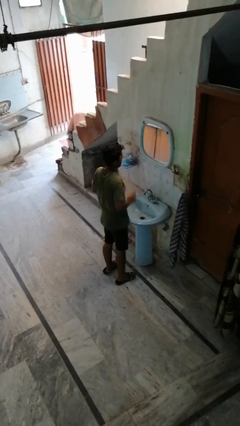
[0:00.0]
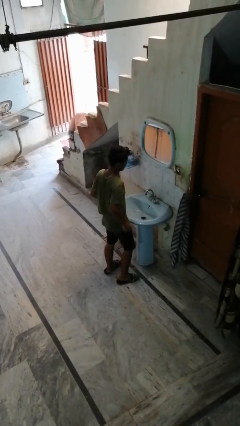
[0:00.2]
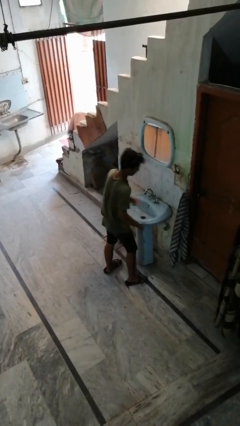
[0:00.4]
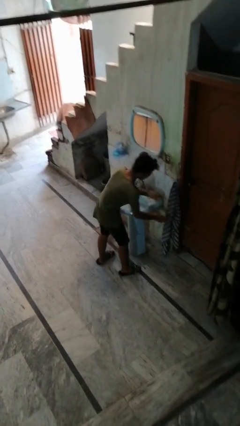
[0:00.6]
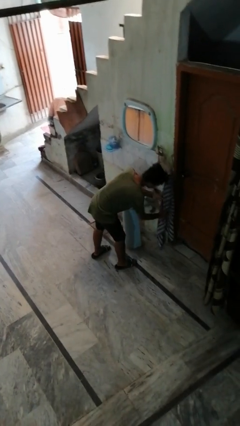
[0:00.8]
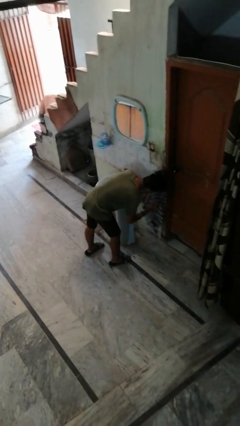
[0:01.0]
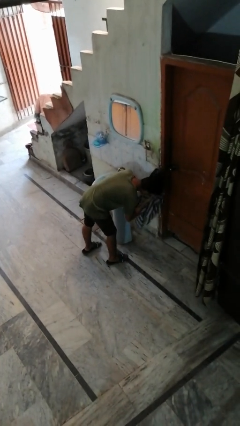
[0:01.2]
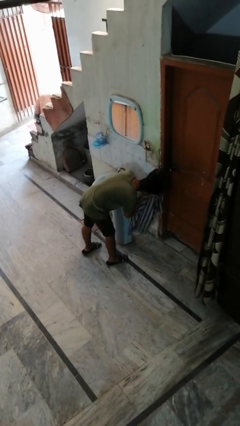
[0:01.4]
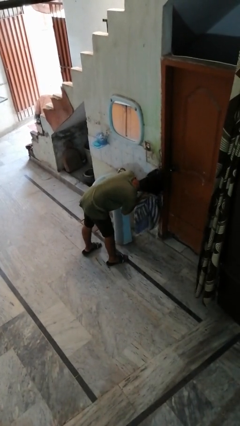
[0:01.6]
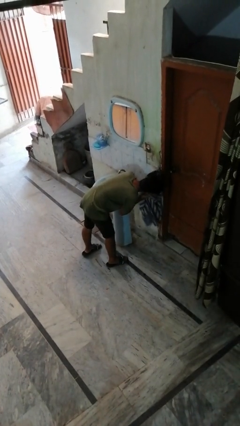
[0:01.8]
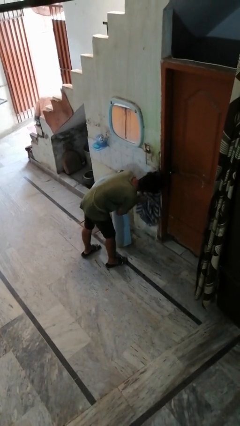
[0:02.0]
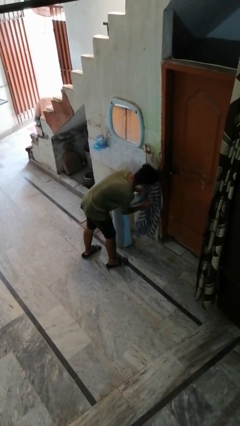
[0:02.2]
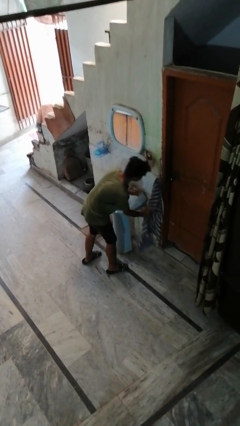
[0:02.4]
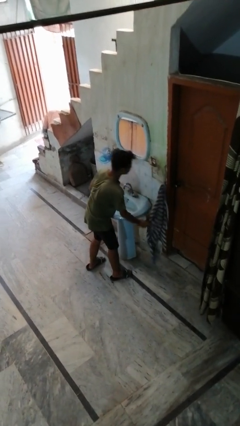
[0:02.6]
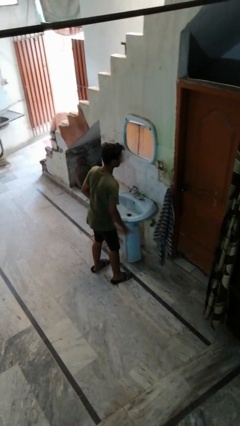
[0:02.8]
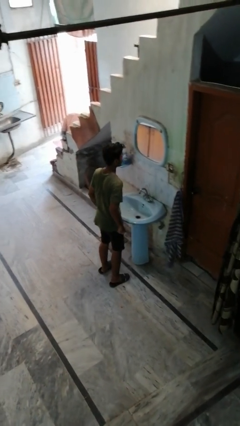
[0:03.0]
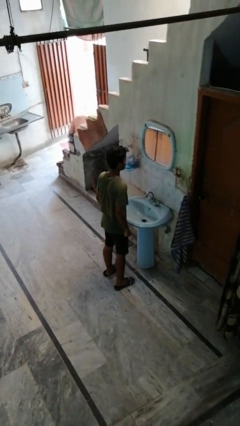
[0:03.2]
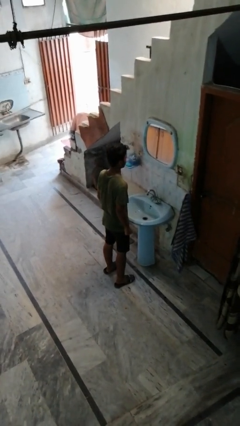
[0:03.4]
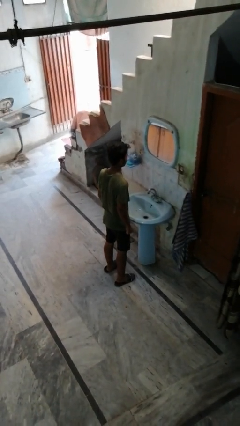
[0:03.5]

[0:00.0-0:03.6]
person dries face with towel

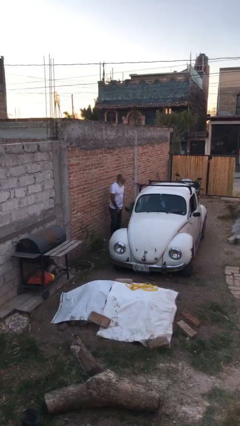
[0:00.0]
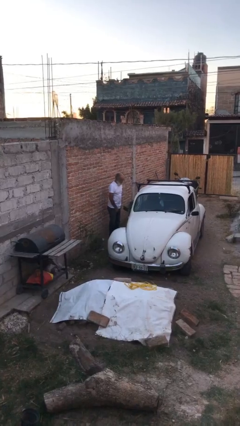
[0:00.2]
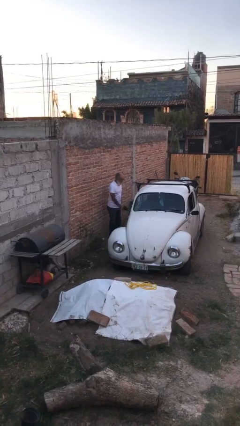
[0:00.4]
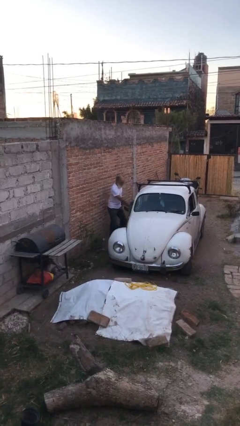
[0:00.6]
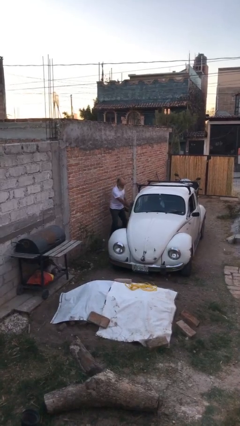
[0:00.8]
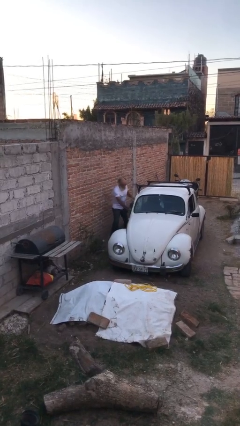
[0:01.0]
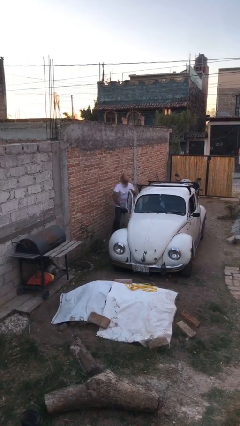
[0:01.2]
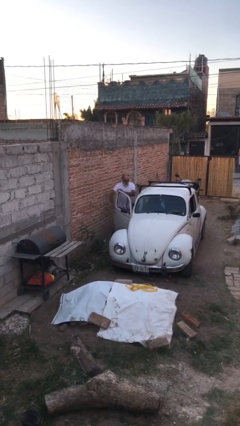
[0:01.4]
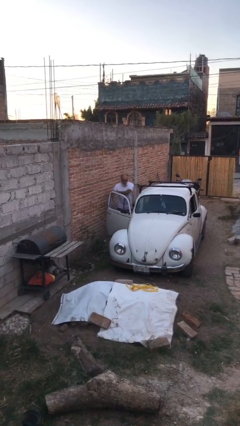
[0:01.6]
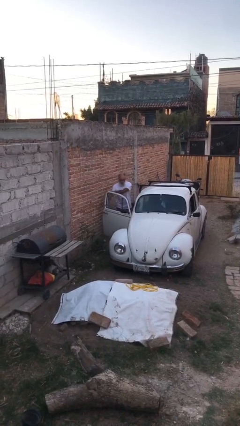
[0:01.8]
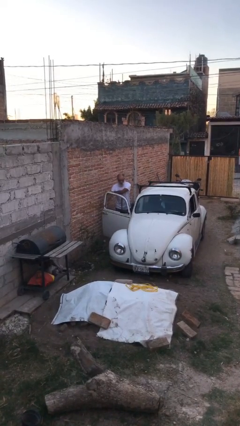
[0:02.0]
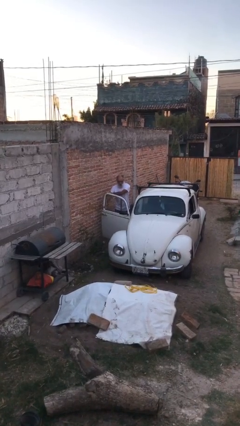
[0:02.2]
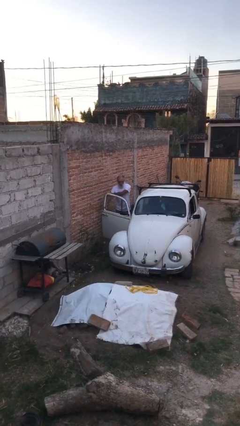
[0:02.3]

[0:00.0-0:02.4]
person opens car door

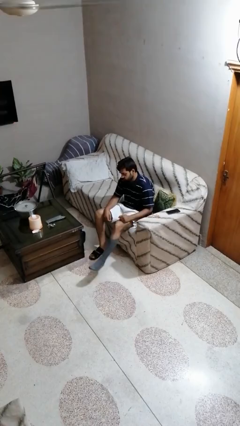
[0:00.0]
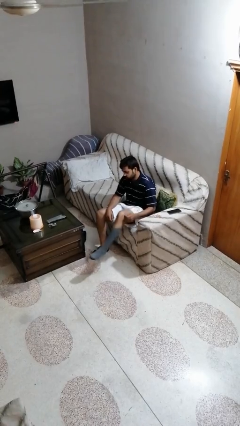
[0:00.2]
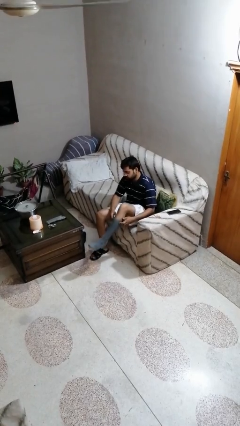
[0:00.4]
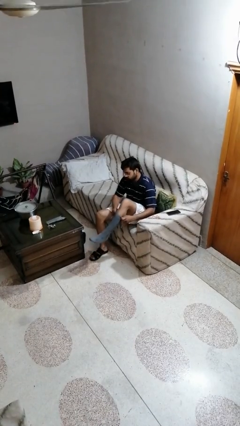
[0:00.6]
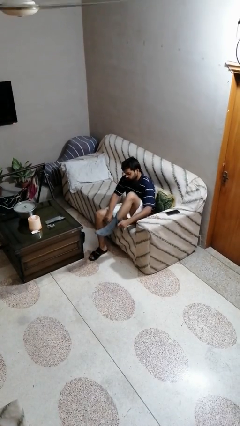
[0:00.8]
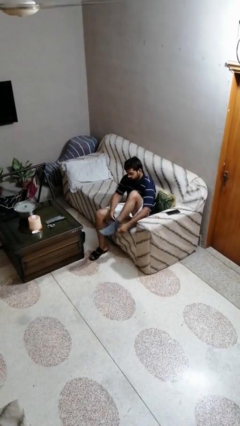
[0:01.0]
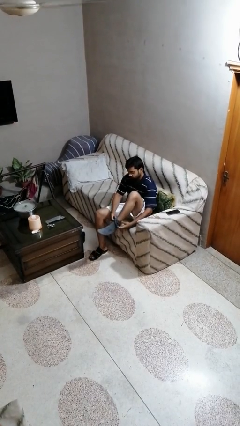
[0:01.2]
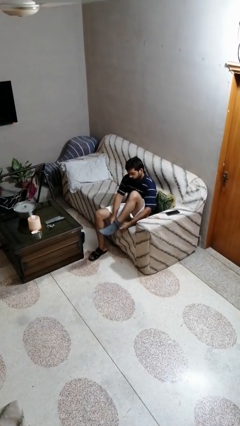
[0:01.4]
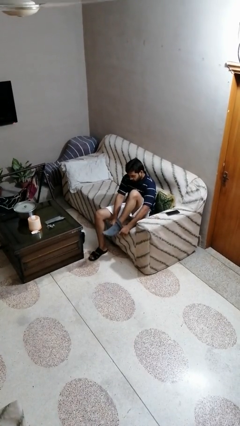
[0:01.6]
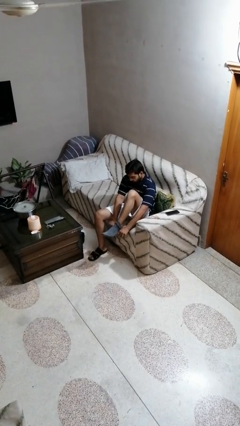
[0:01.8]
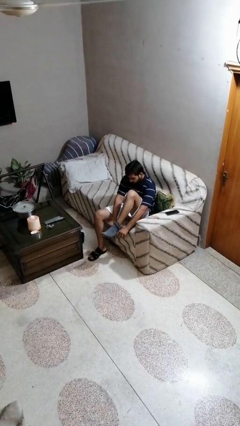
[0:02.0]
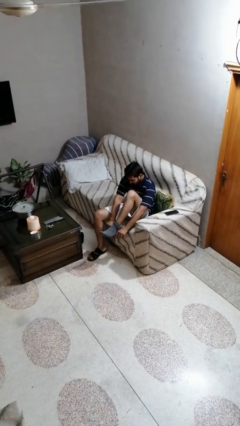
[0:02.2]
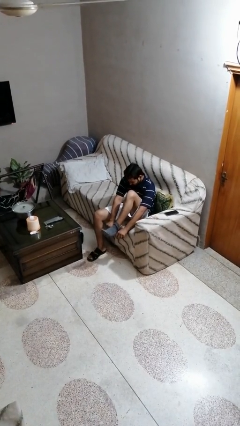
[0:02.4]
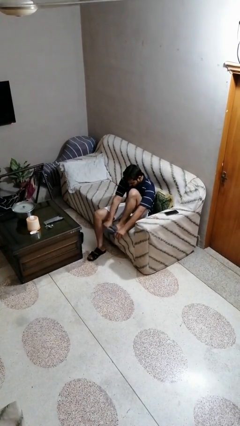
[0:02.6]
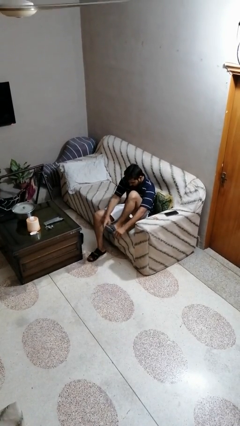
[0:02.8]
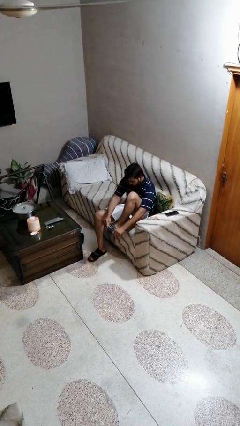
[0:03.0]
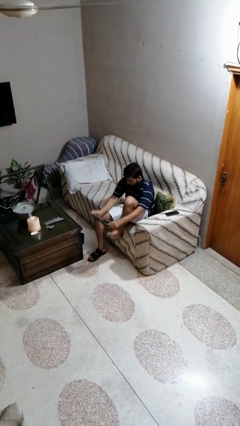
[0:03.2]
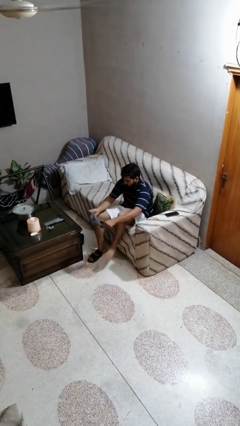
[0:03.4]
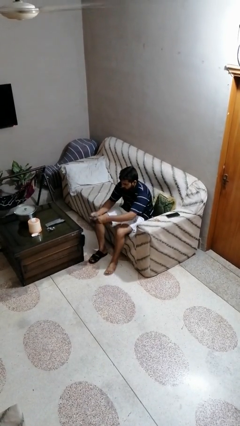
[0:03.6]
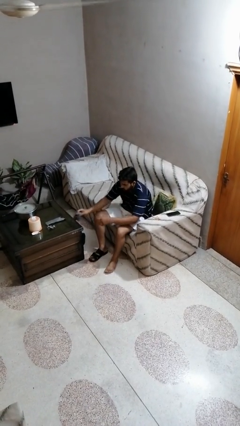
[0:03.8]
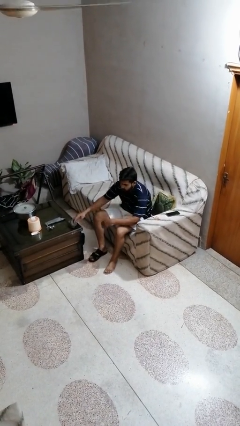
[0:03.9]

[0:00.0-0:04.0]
person takes off socks

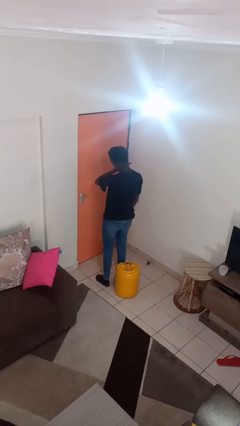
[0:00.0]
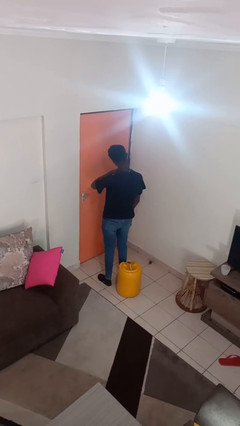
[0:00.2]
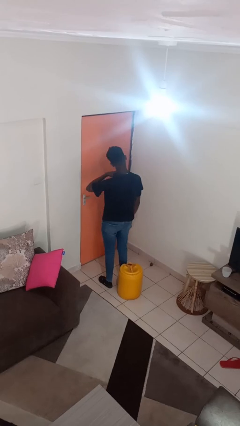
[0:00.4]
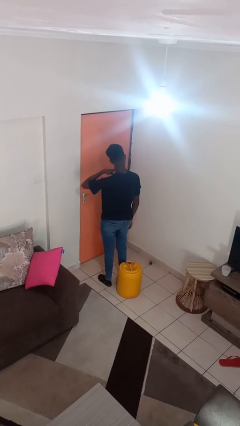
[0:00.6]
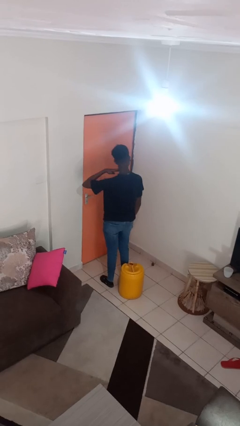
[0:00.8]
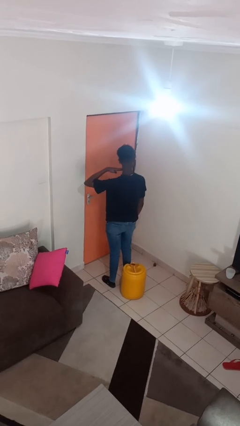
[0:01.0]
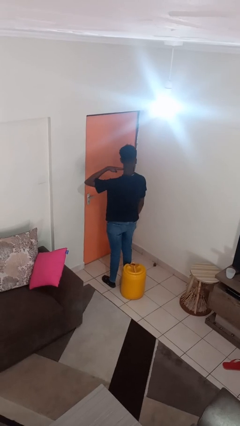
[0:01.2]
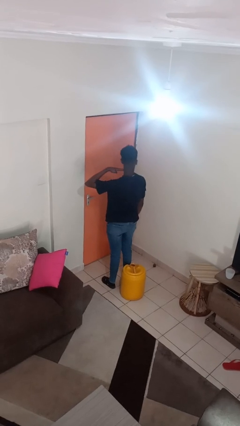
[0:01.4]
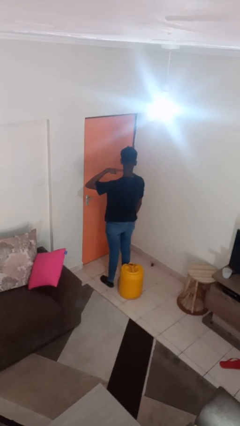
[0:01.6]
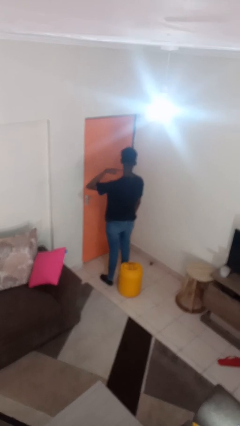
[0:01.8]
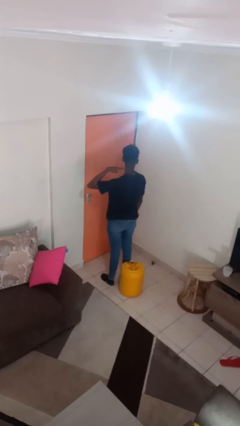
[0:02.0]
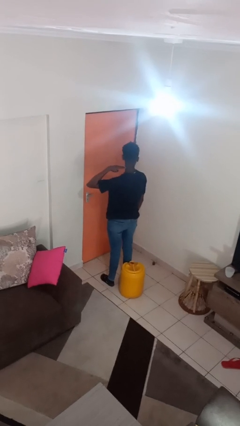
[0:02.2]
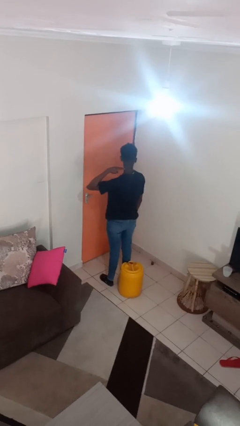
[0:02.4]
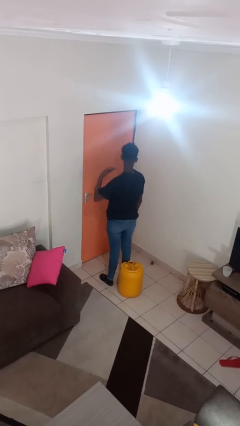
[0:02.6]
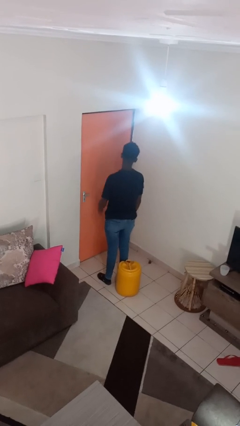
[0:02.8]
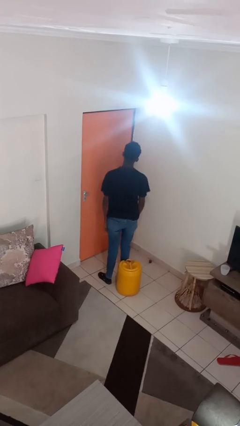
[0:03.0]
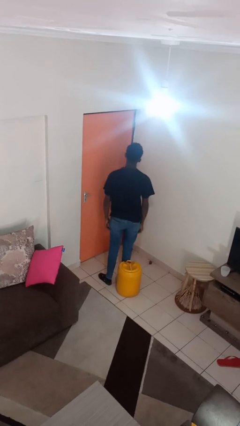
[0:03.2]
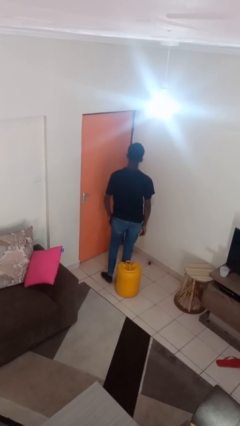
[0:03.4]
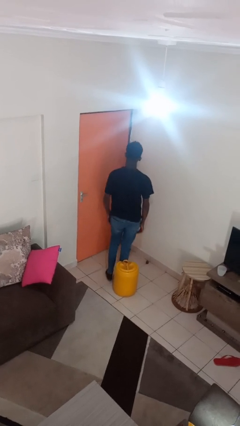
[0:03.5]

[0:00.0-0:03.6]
person gestures cut

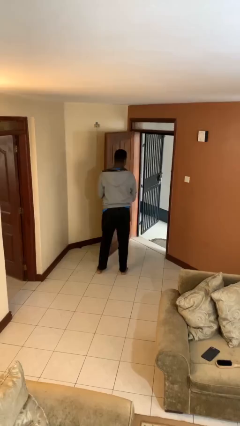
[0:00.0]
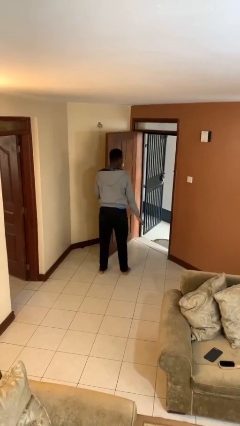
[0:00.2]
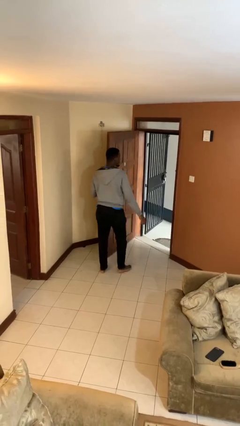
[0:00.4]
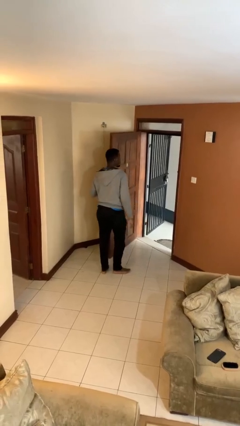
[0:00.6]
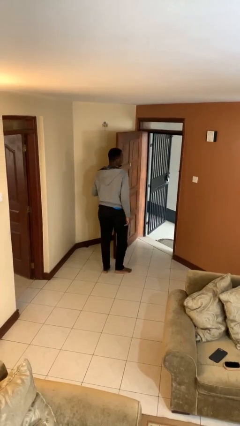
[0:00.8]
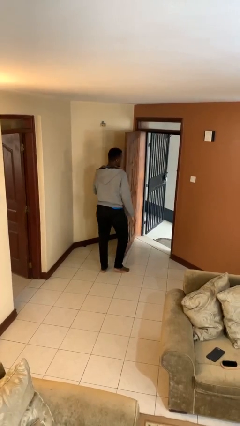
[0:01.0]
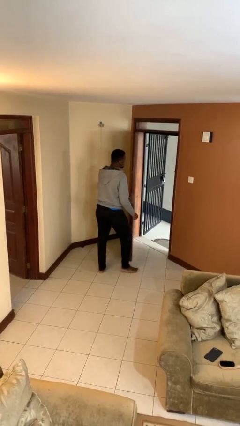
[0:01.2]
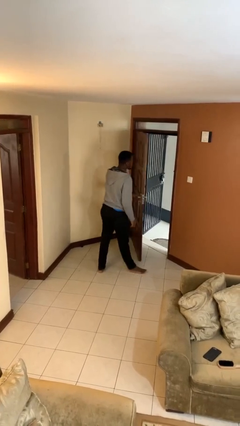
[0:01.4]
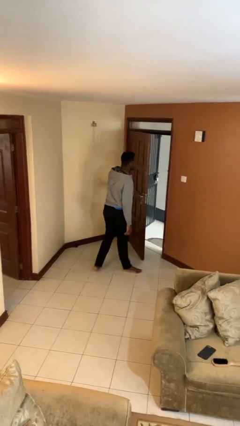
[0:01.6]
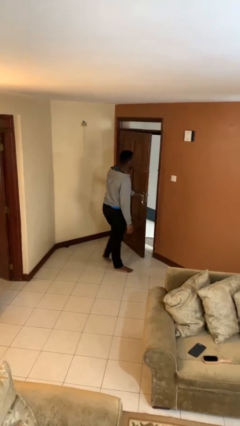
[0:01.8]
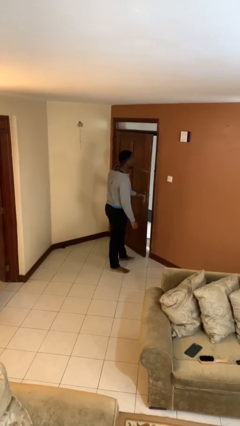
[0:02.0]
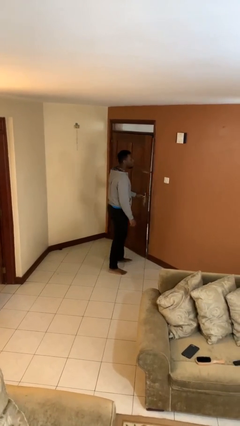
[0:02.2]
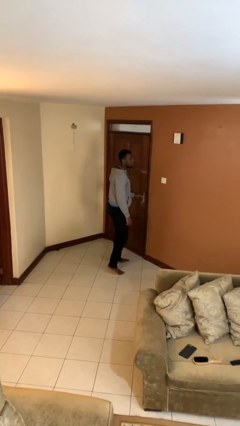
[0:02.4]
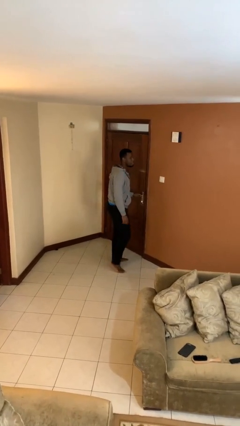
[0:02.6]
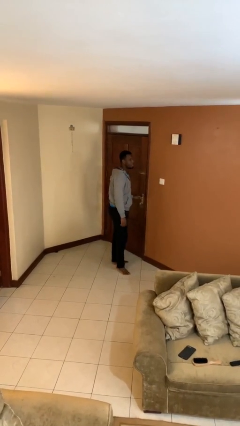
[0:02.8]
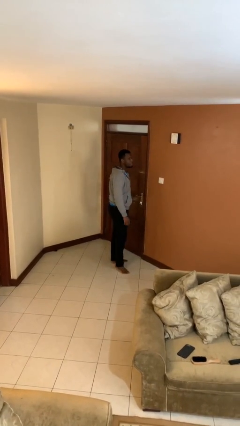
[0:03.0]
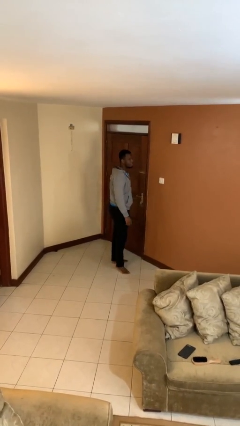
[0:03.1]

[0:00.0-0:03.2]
person closes facility door

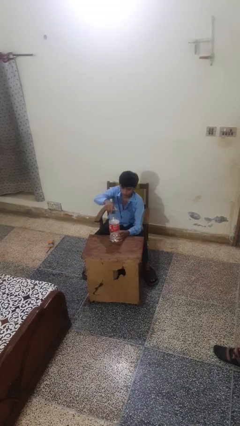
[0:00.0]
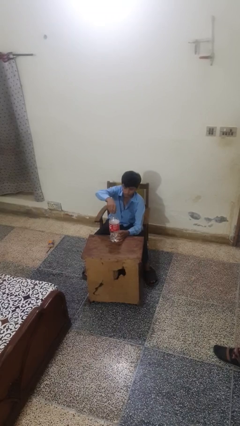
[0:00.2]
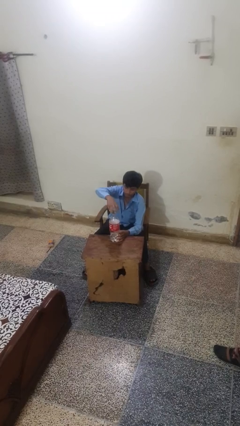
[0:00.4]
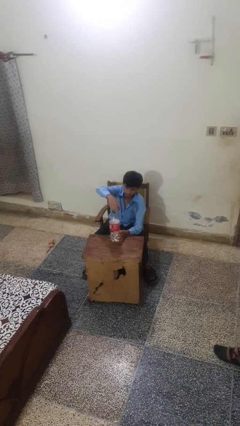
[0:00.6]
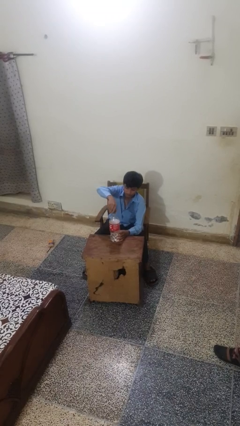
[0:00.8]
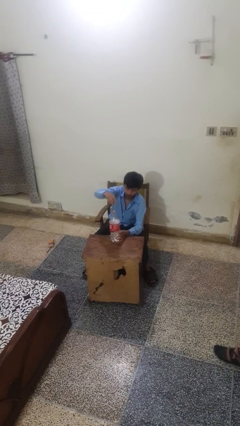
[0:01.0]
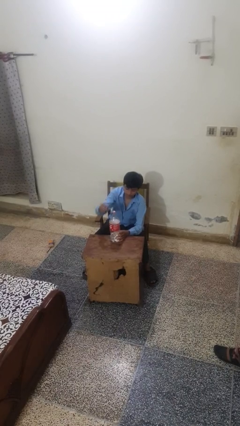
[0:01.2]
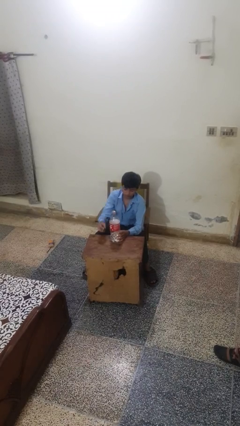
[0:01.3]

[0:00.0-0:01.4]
person unscrews lid from bottle
